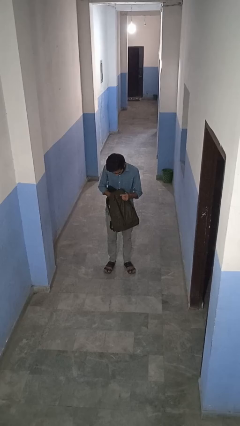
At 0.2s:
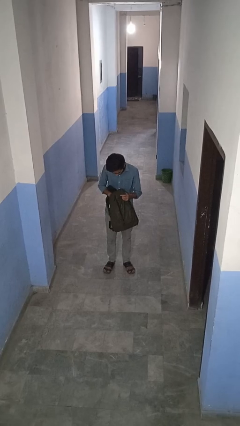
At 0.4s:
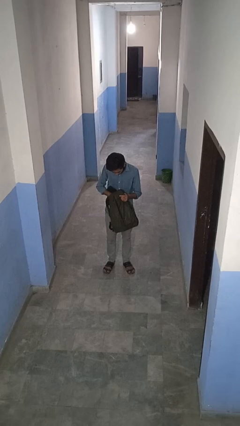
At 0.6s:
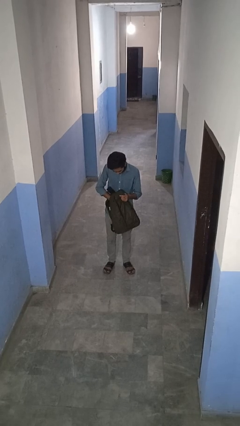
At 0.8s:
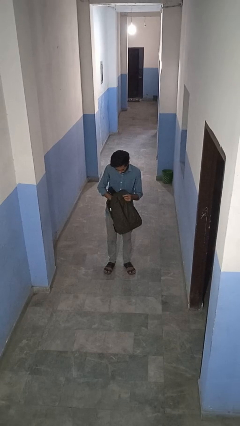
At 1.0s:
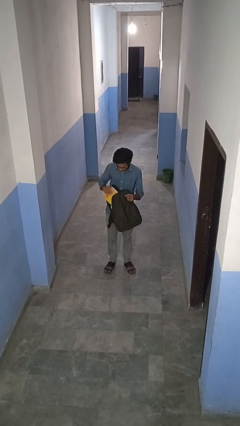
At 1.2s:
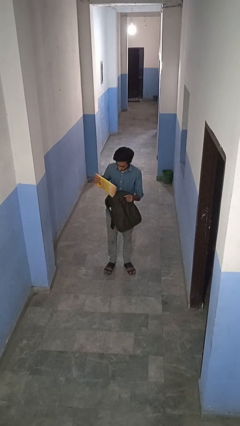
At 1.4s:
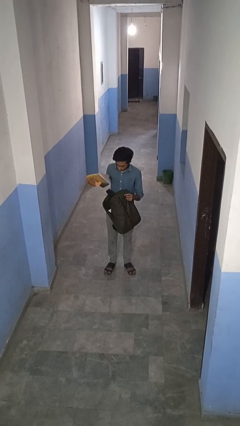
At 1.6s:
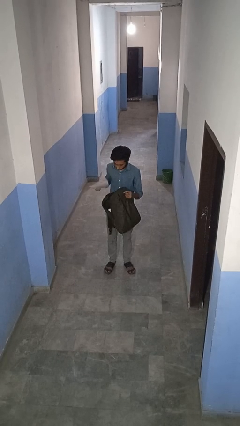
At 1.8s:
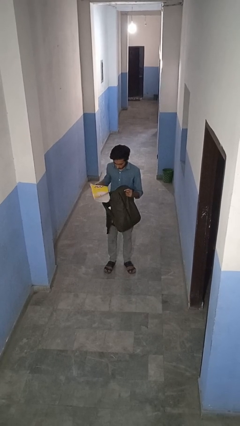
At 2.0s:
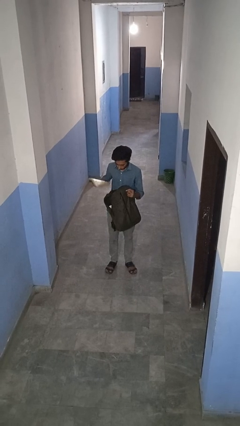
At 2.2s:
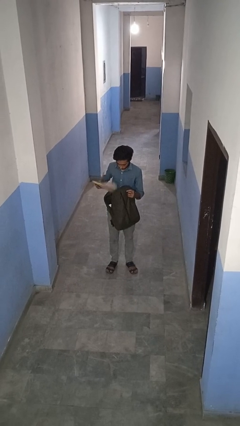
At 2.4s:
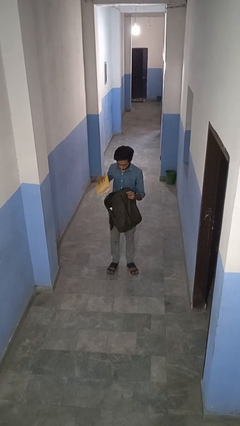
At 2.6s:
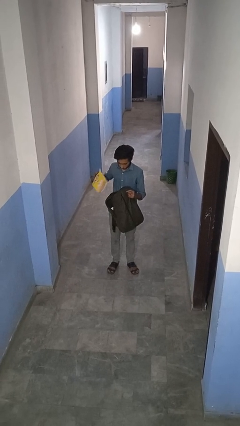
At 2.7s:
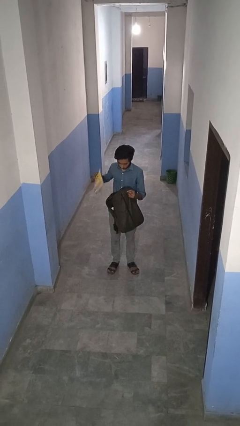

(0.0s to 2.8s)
person takes object from backpack

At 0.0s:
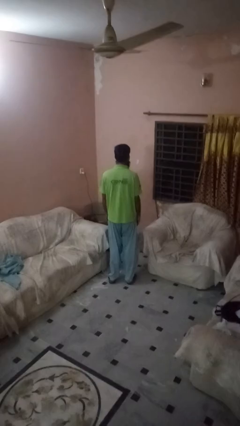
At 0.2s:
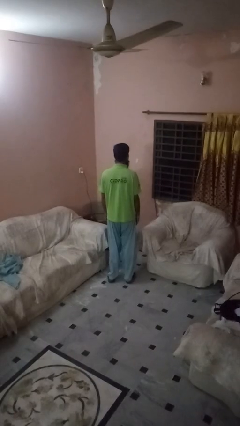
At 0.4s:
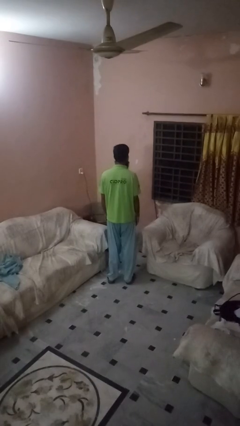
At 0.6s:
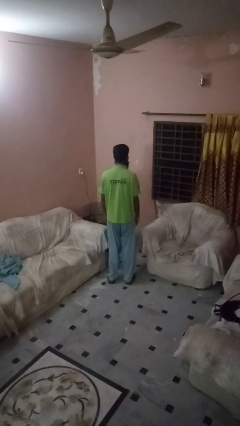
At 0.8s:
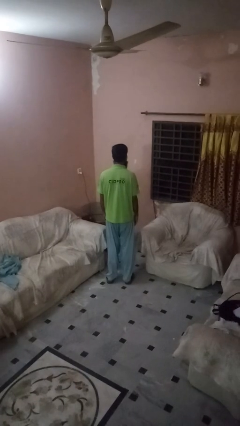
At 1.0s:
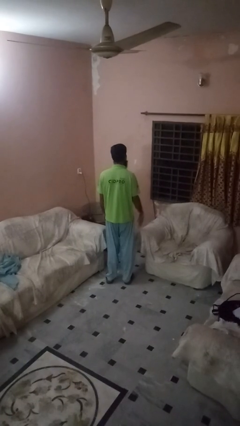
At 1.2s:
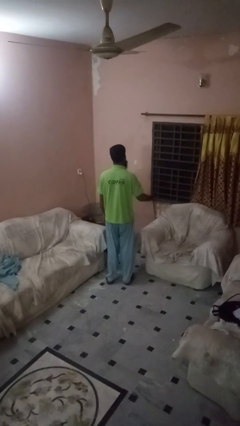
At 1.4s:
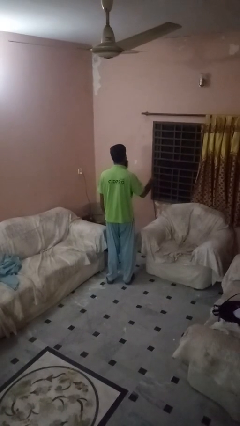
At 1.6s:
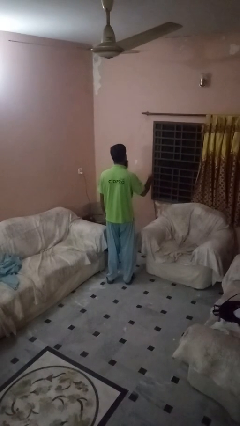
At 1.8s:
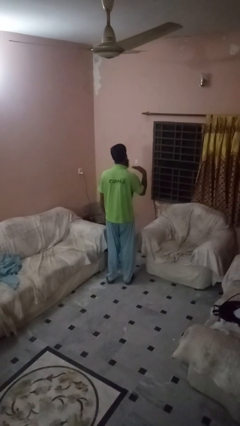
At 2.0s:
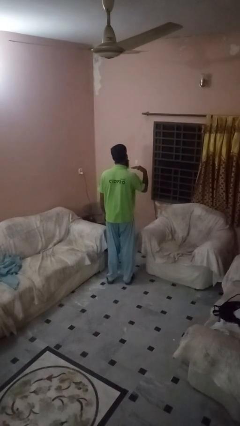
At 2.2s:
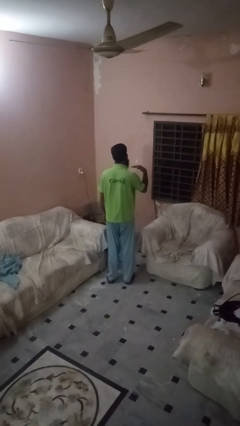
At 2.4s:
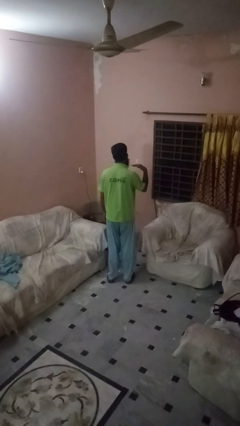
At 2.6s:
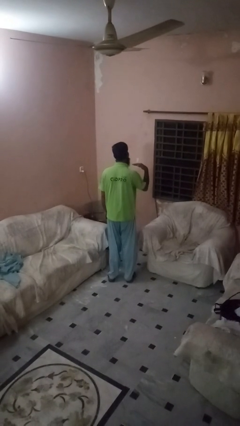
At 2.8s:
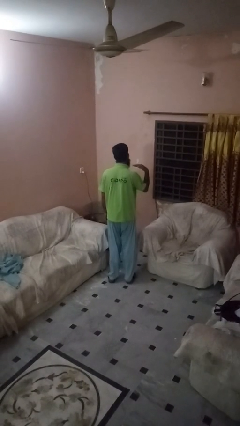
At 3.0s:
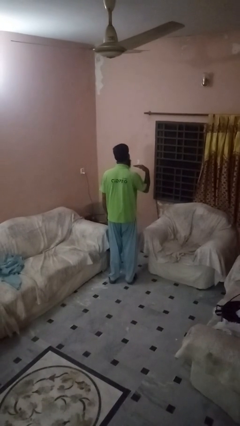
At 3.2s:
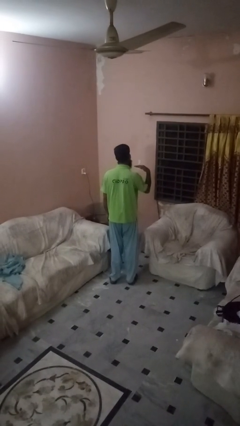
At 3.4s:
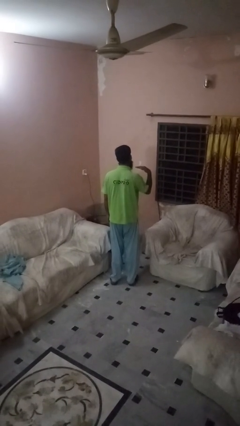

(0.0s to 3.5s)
person gestures cut

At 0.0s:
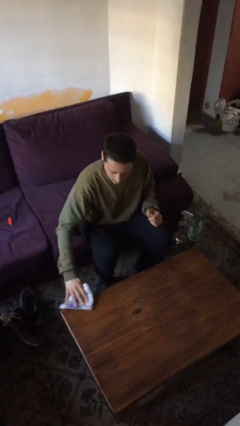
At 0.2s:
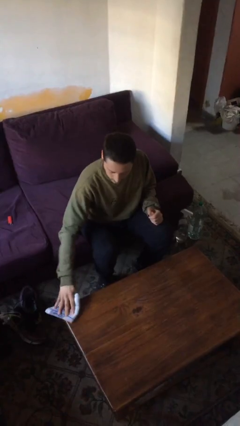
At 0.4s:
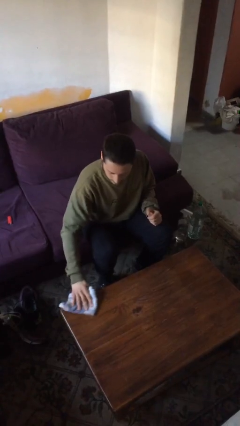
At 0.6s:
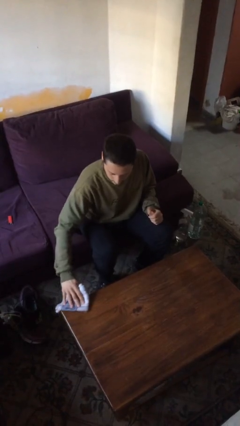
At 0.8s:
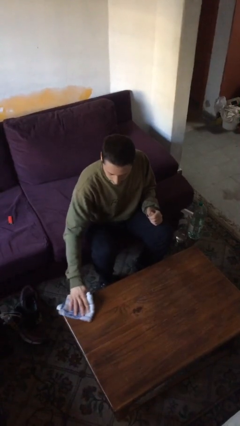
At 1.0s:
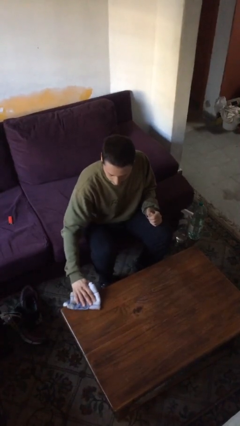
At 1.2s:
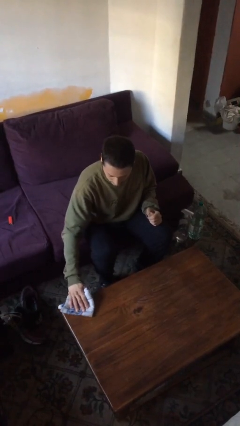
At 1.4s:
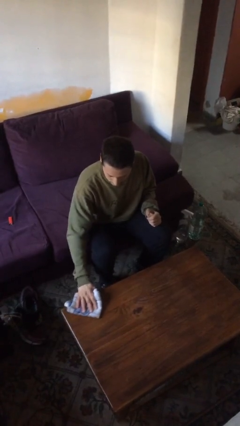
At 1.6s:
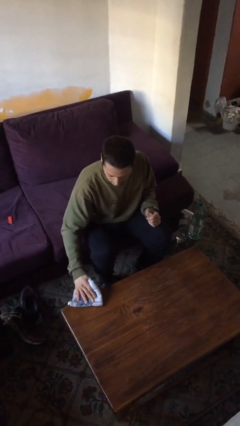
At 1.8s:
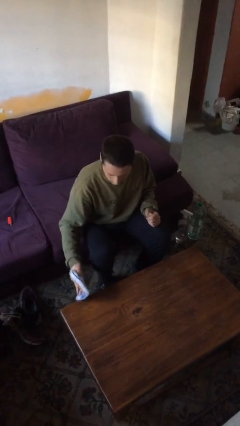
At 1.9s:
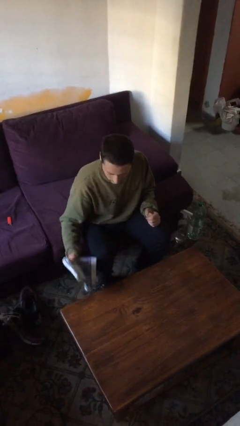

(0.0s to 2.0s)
person cleans table with rag

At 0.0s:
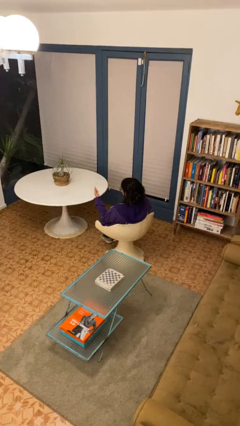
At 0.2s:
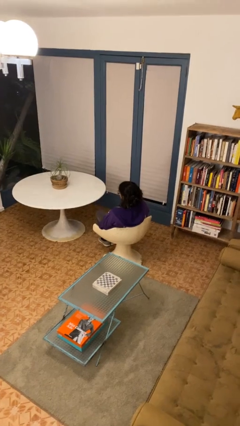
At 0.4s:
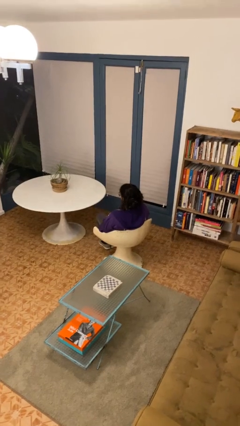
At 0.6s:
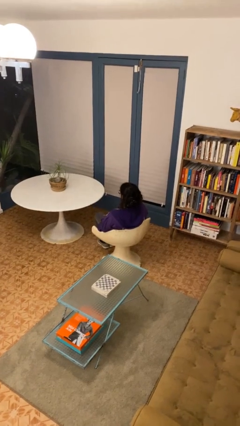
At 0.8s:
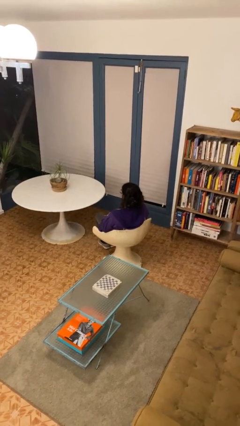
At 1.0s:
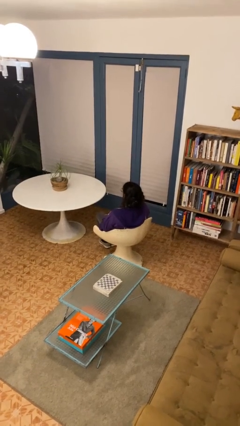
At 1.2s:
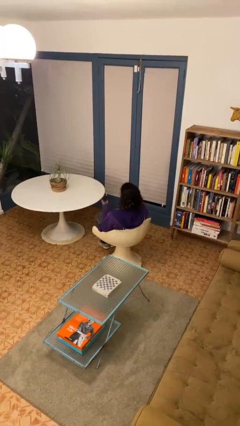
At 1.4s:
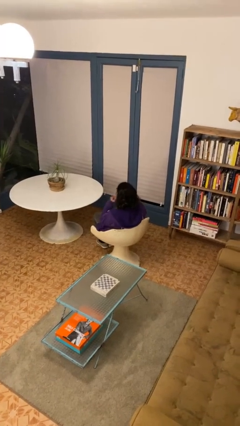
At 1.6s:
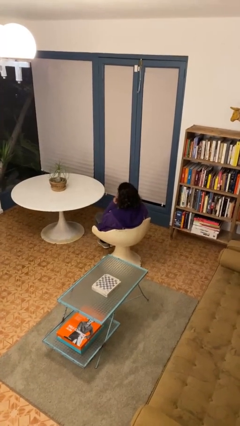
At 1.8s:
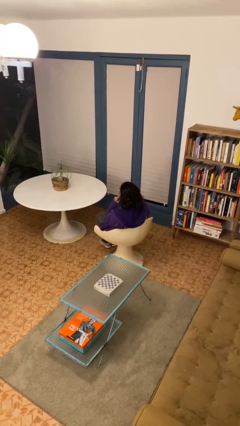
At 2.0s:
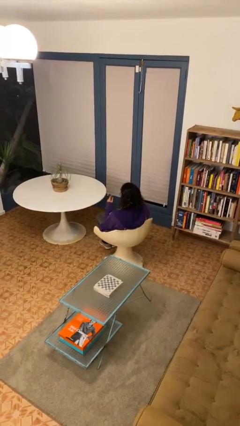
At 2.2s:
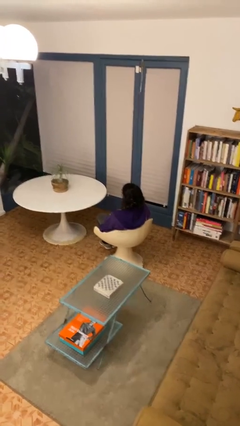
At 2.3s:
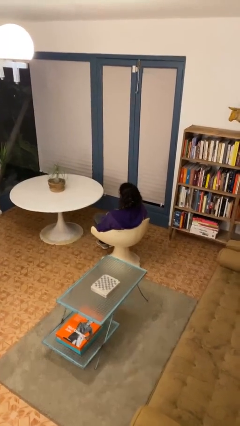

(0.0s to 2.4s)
person gestures listen closely

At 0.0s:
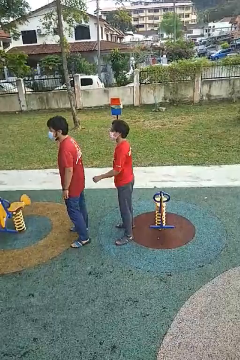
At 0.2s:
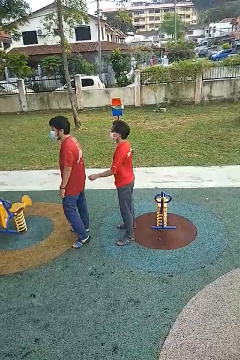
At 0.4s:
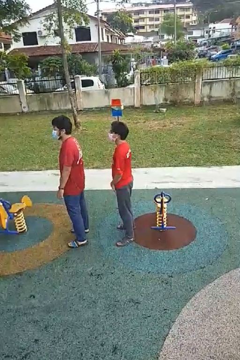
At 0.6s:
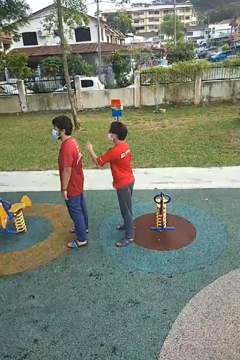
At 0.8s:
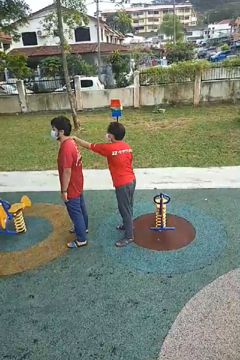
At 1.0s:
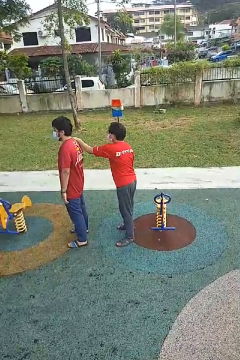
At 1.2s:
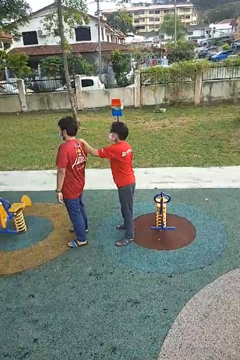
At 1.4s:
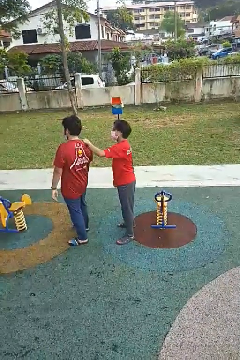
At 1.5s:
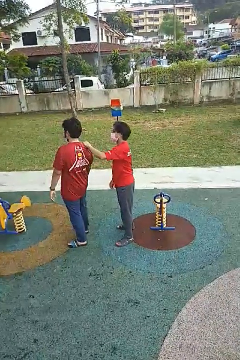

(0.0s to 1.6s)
person grabs person by shoulder

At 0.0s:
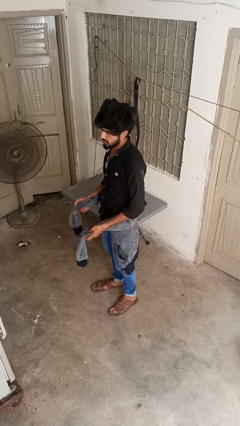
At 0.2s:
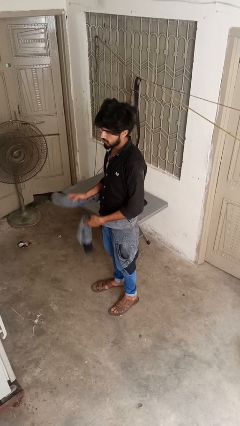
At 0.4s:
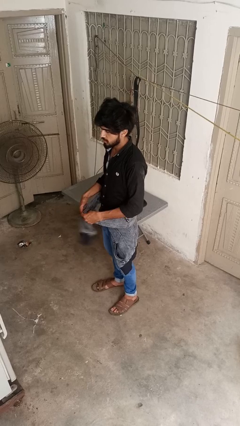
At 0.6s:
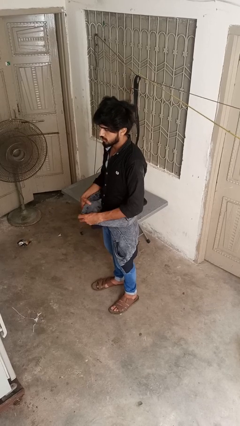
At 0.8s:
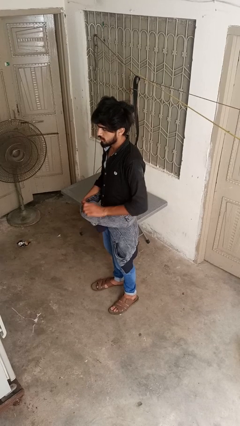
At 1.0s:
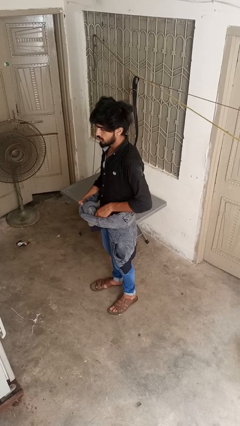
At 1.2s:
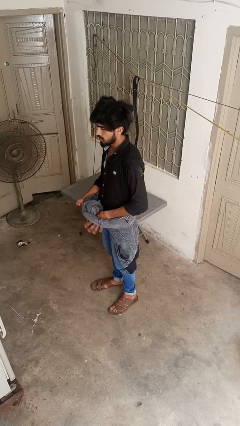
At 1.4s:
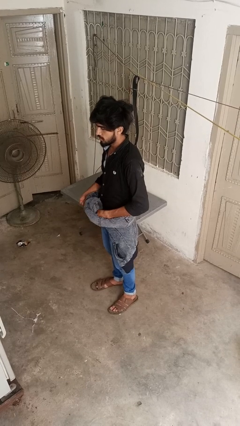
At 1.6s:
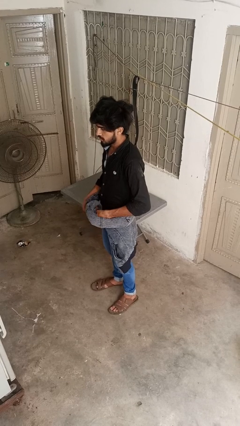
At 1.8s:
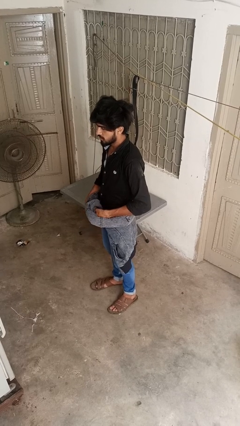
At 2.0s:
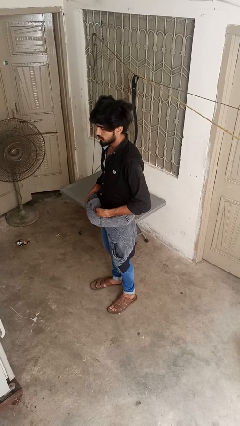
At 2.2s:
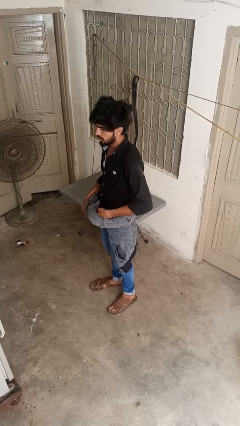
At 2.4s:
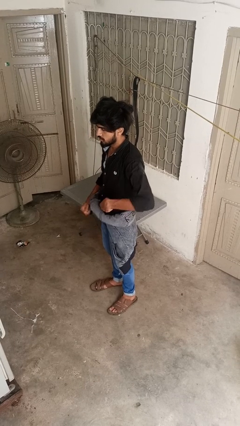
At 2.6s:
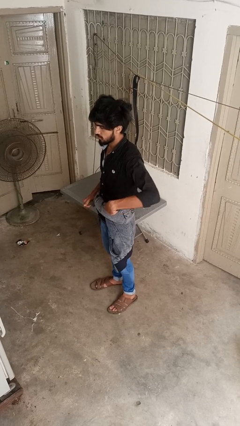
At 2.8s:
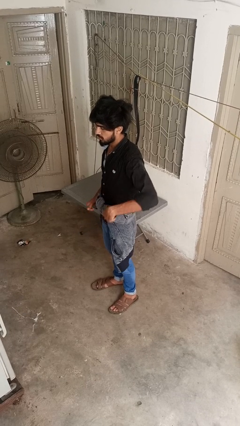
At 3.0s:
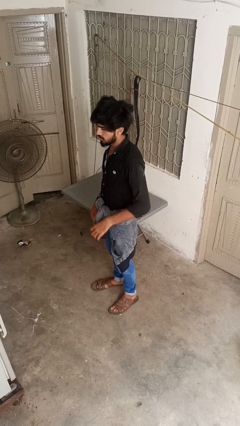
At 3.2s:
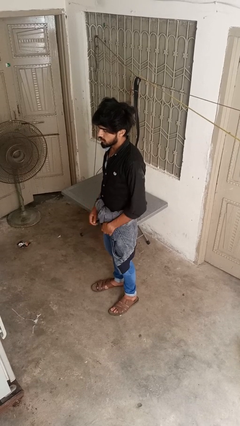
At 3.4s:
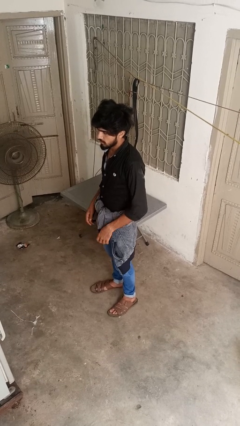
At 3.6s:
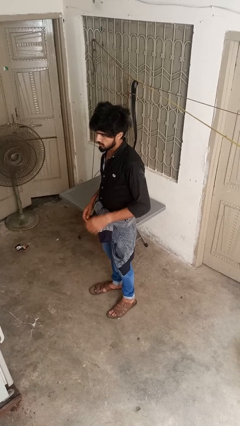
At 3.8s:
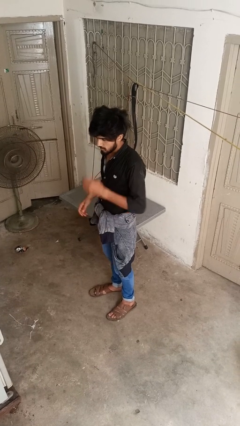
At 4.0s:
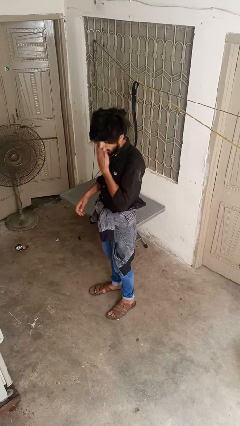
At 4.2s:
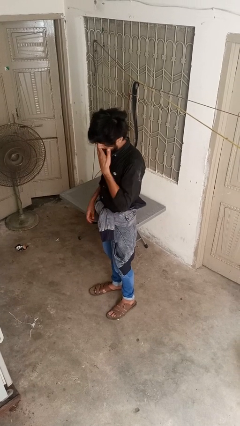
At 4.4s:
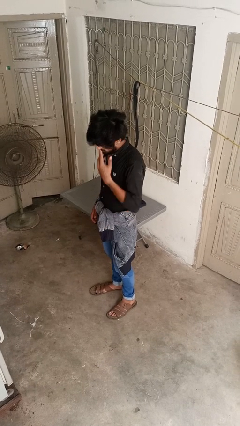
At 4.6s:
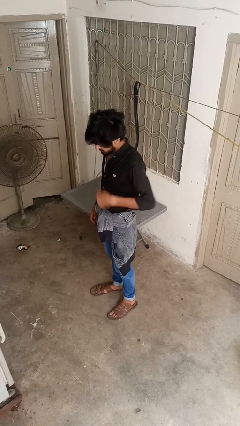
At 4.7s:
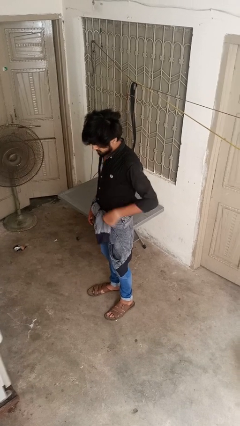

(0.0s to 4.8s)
person ties jacket around waist

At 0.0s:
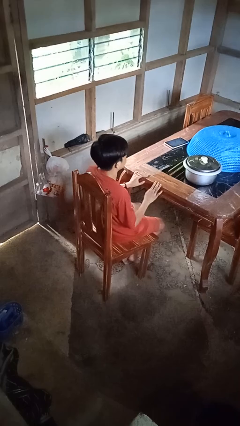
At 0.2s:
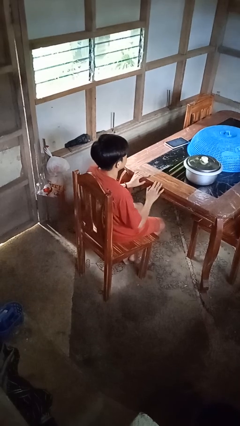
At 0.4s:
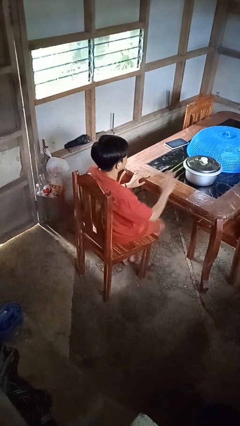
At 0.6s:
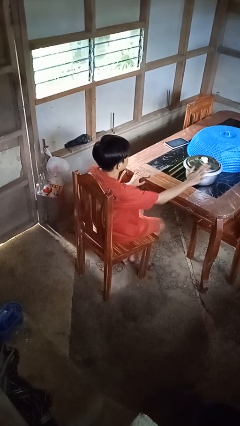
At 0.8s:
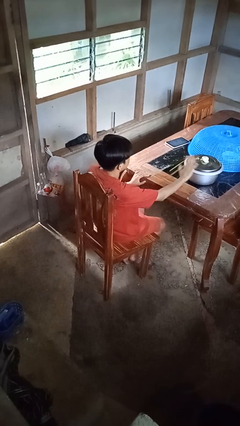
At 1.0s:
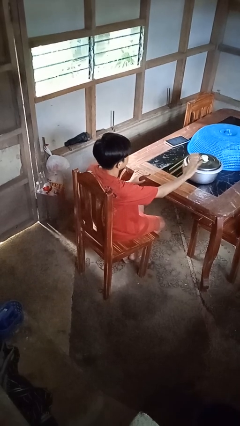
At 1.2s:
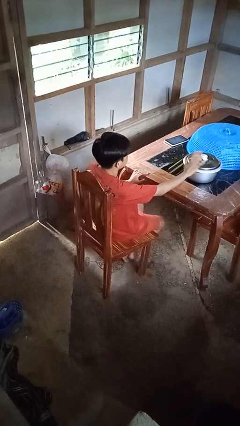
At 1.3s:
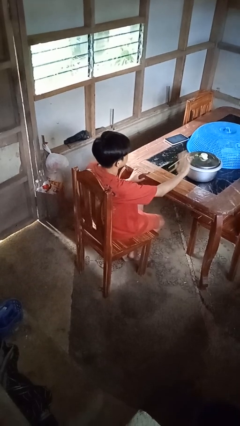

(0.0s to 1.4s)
person waves hand over object
